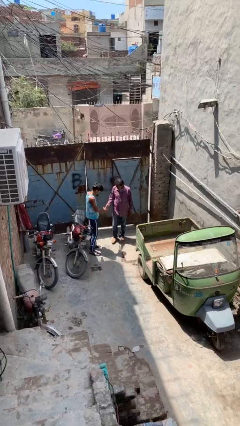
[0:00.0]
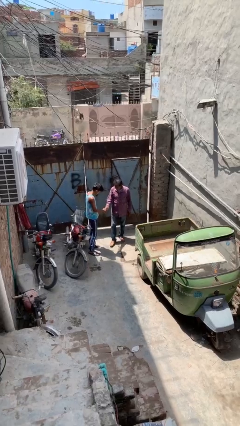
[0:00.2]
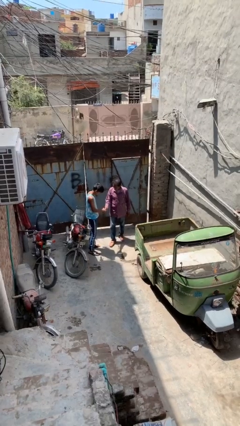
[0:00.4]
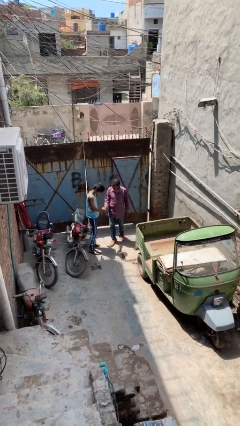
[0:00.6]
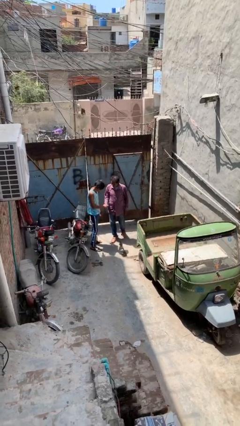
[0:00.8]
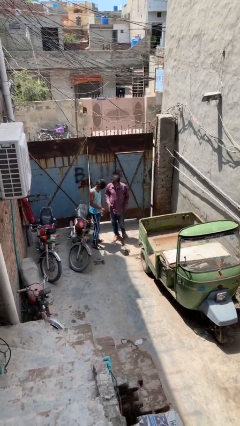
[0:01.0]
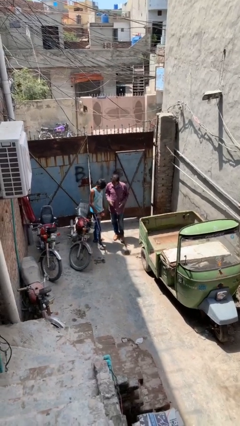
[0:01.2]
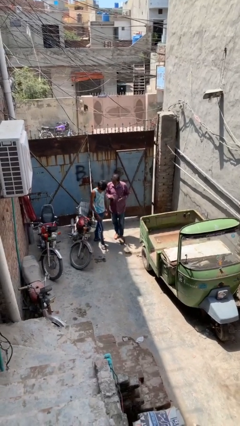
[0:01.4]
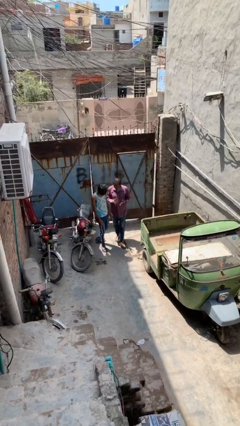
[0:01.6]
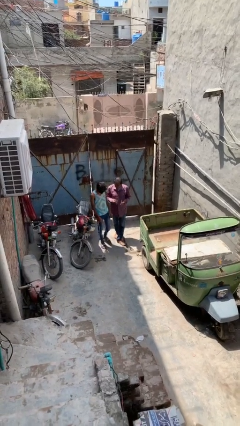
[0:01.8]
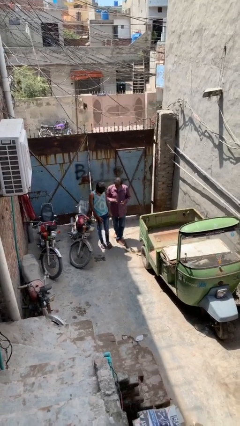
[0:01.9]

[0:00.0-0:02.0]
person shakes hand

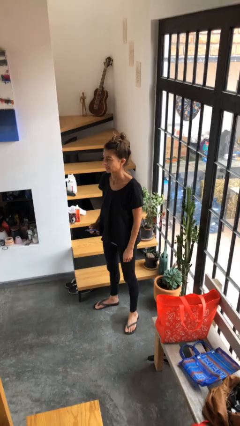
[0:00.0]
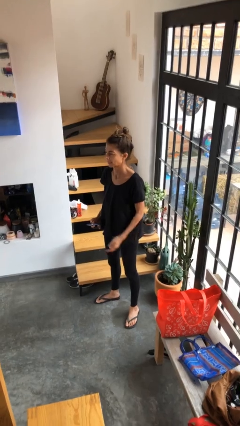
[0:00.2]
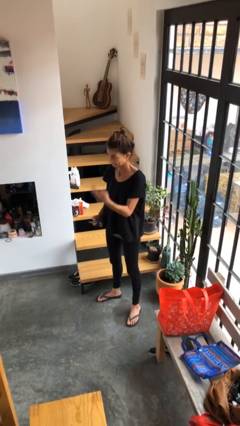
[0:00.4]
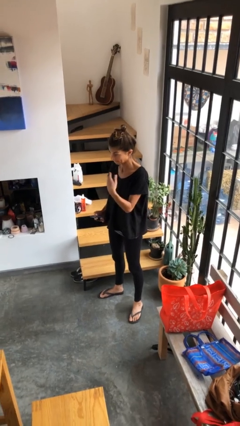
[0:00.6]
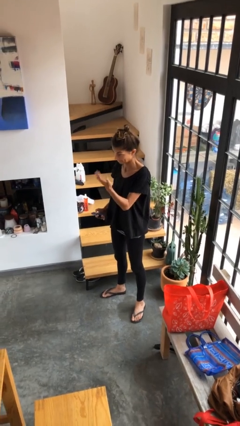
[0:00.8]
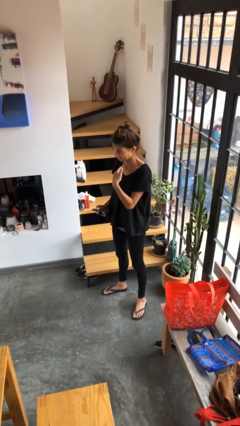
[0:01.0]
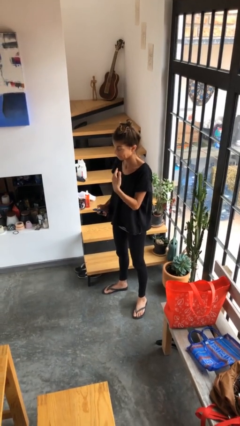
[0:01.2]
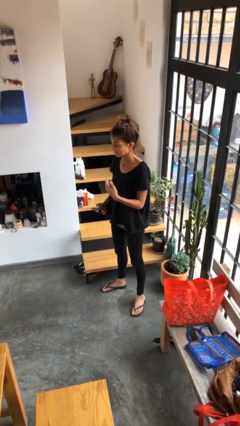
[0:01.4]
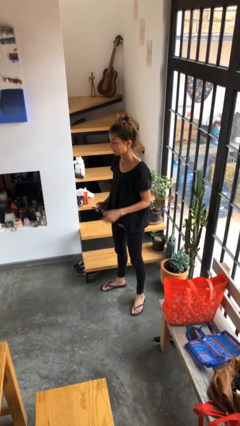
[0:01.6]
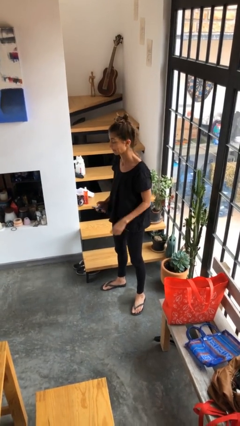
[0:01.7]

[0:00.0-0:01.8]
person gestures come here

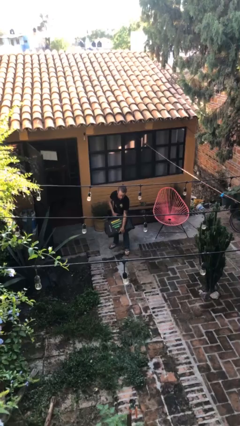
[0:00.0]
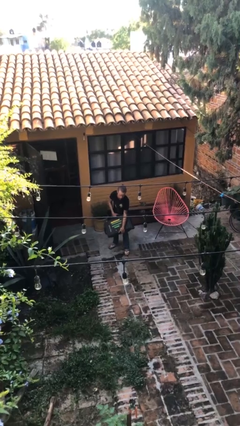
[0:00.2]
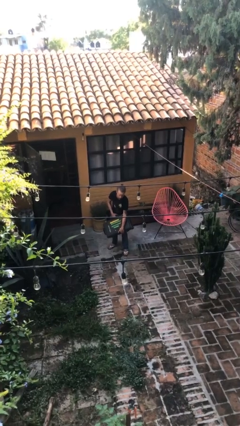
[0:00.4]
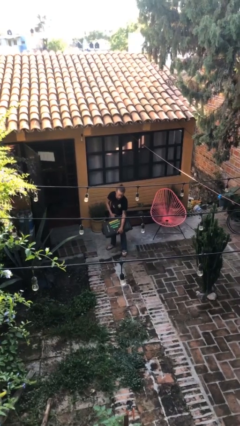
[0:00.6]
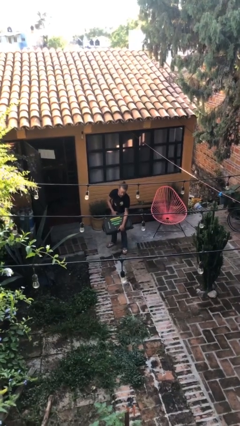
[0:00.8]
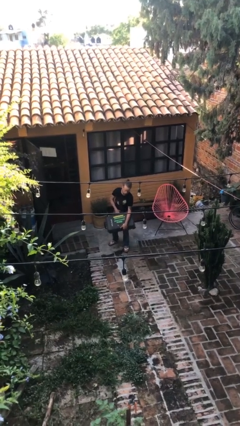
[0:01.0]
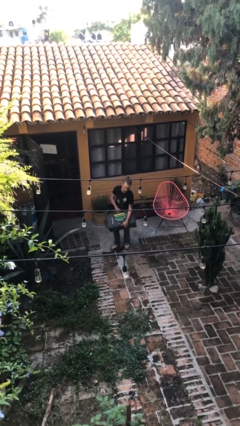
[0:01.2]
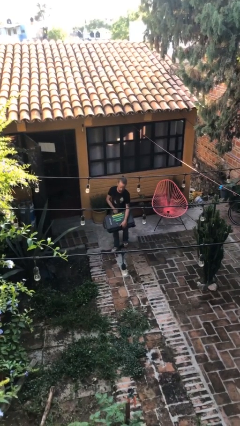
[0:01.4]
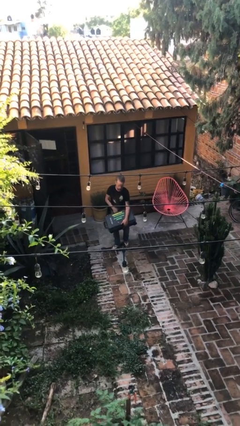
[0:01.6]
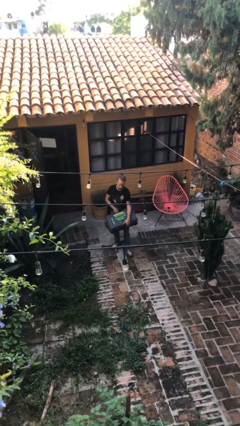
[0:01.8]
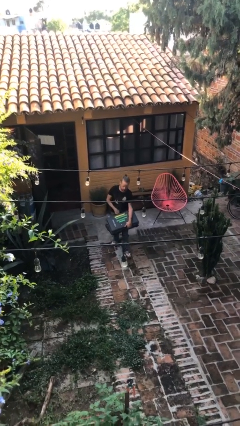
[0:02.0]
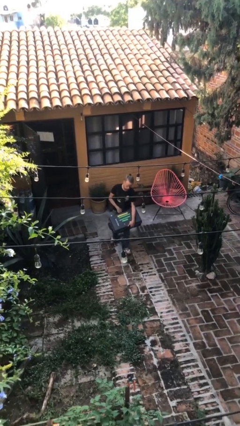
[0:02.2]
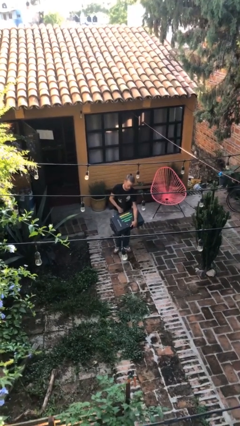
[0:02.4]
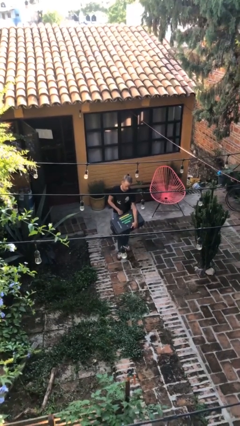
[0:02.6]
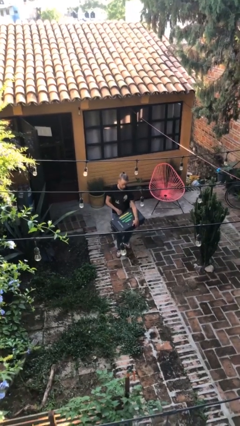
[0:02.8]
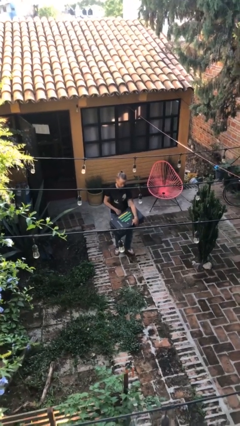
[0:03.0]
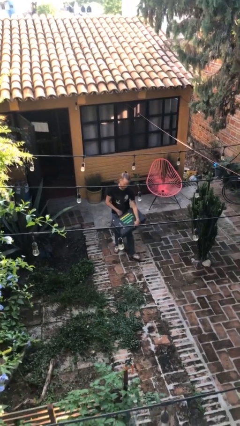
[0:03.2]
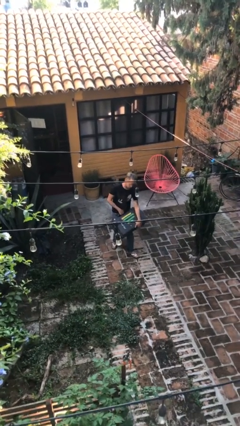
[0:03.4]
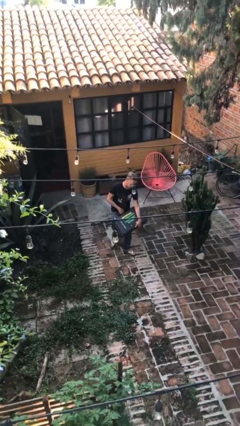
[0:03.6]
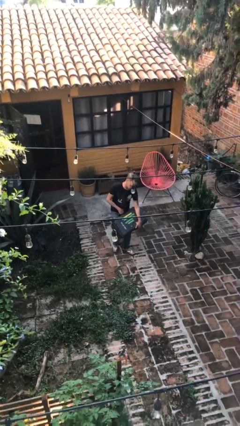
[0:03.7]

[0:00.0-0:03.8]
person carries heavy object

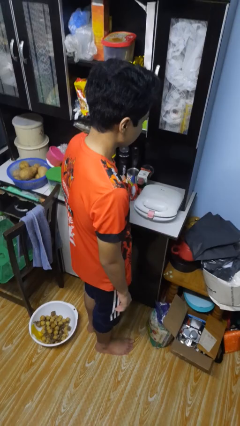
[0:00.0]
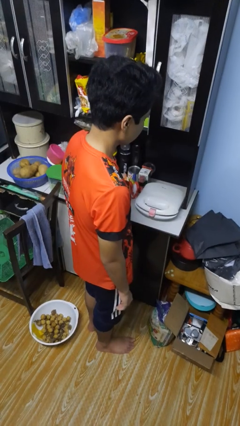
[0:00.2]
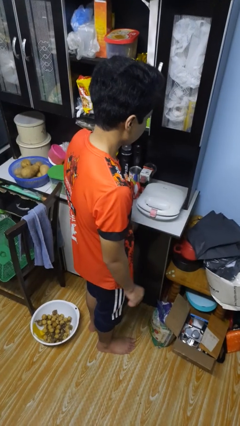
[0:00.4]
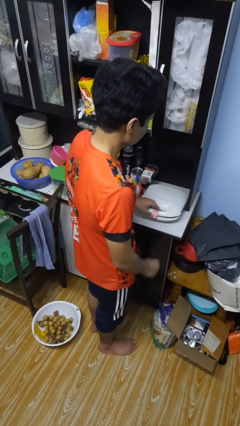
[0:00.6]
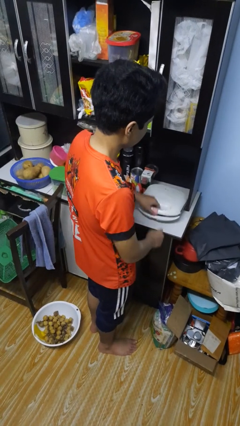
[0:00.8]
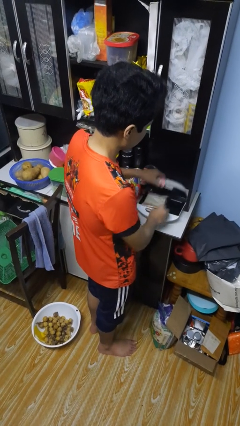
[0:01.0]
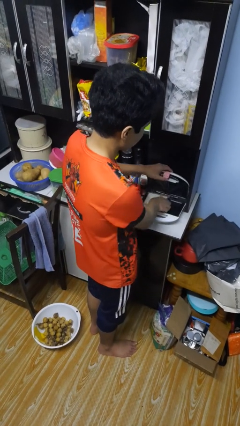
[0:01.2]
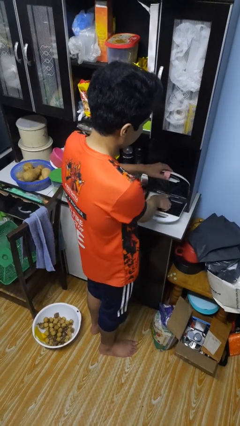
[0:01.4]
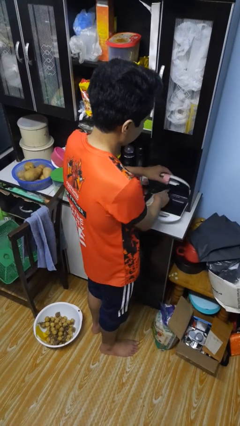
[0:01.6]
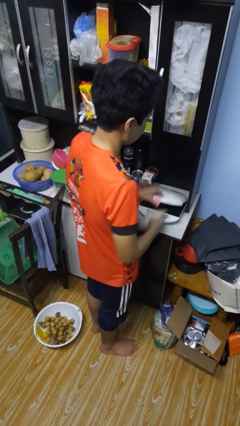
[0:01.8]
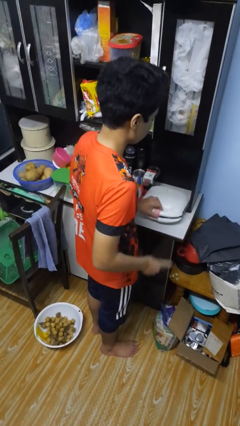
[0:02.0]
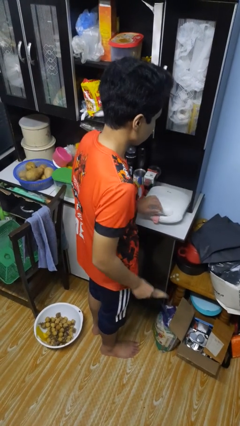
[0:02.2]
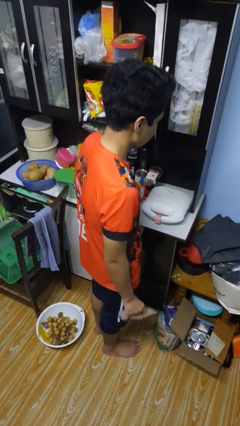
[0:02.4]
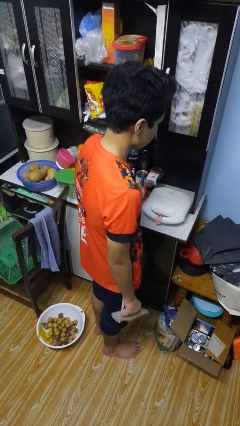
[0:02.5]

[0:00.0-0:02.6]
person takes object from toaster

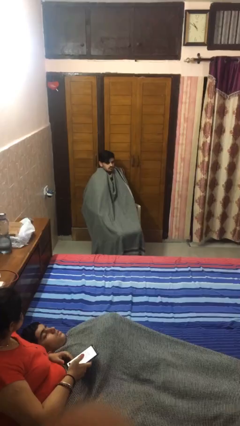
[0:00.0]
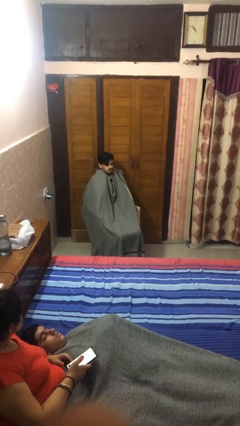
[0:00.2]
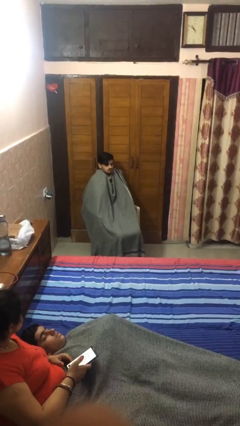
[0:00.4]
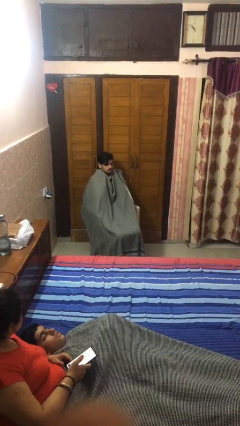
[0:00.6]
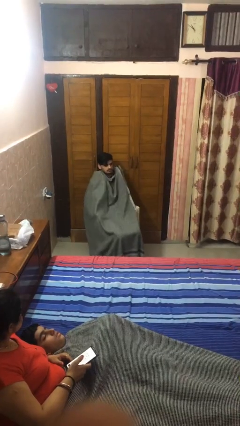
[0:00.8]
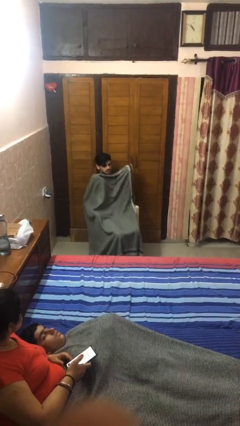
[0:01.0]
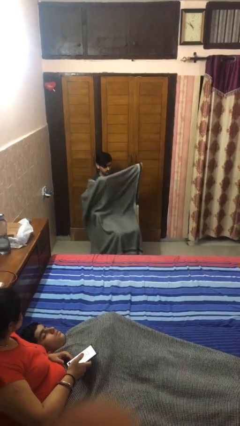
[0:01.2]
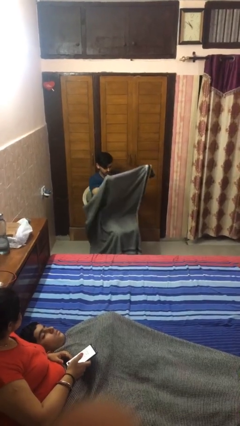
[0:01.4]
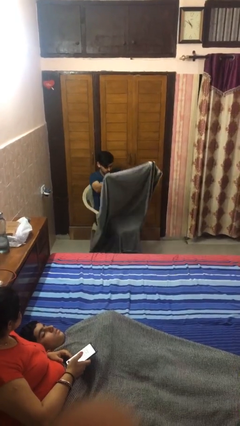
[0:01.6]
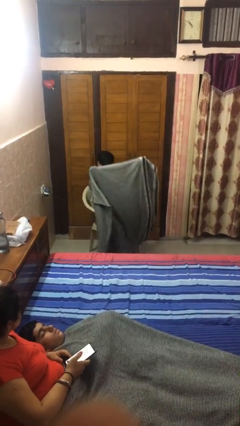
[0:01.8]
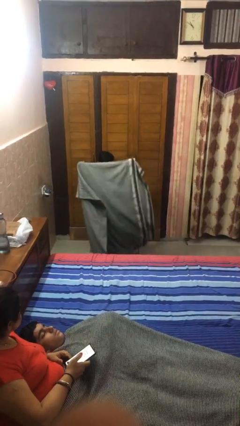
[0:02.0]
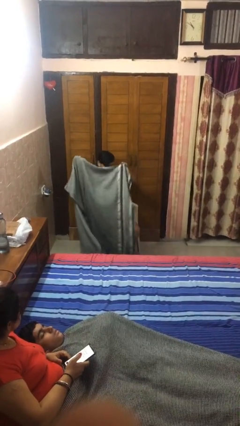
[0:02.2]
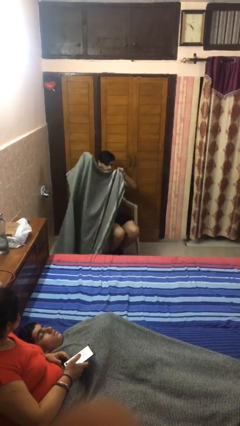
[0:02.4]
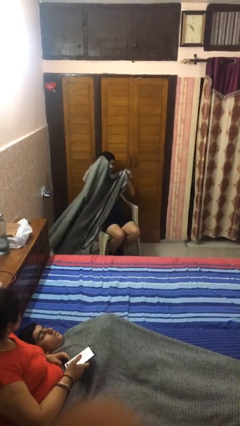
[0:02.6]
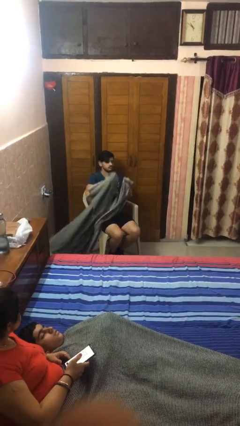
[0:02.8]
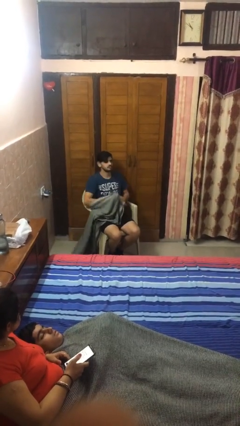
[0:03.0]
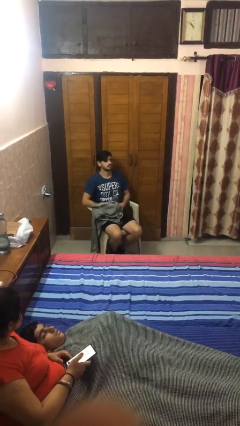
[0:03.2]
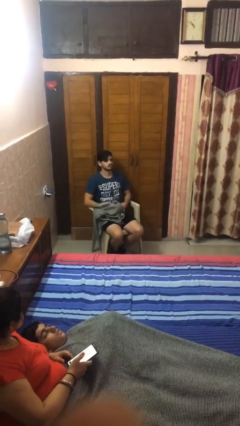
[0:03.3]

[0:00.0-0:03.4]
person uncovers with blanket

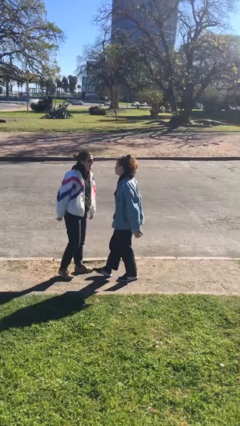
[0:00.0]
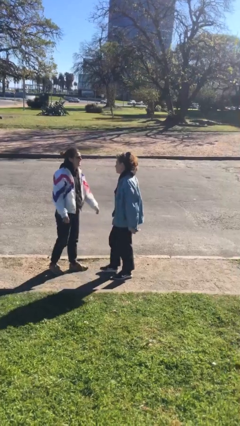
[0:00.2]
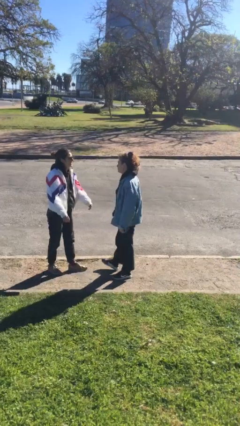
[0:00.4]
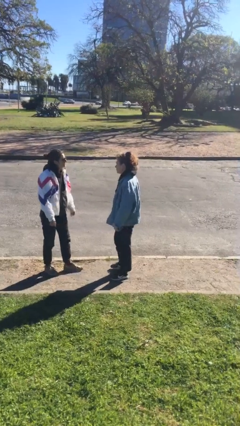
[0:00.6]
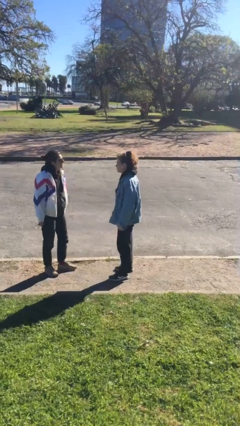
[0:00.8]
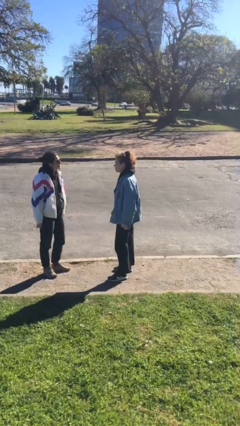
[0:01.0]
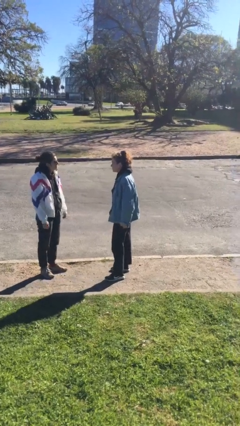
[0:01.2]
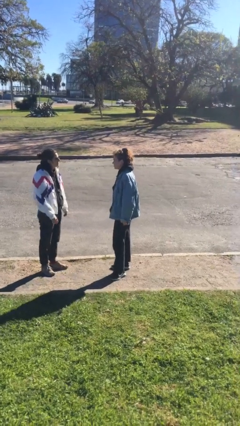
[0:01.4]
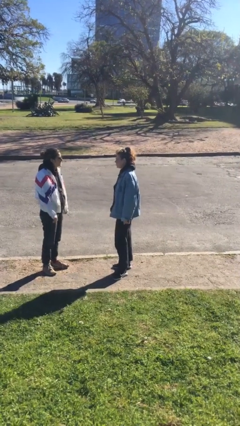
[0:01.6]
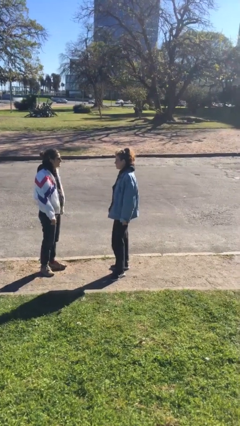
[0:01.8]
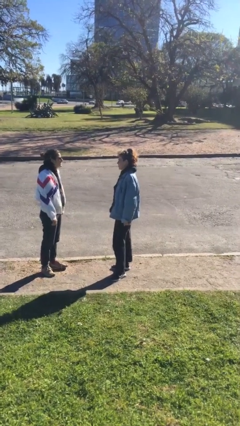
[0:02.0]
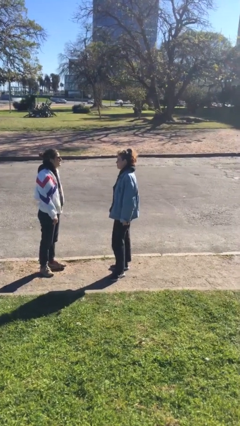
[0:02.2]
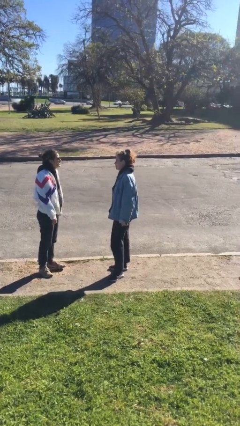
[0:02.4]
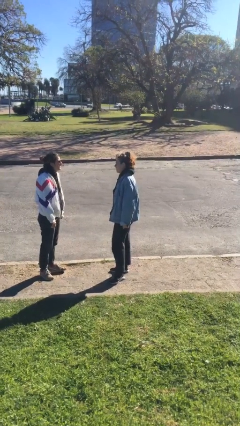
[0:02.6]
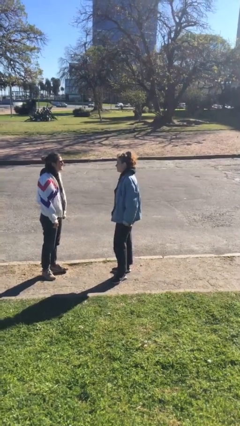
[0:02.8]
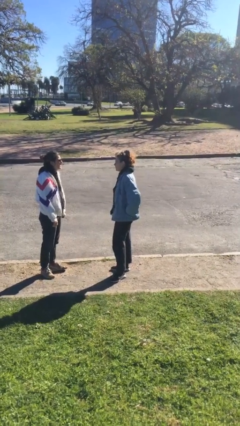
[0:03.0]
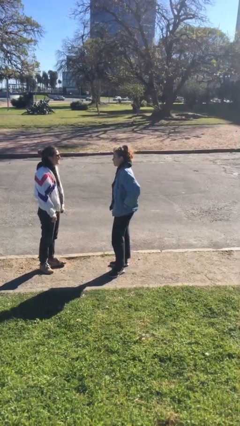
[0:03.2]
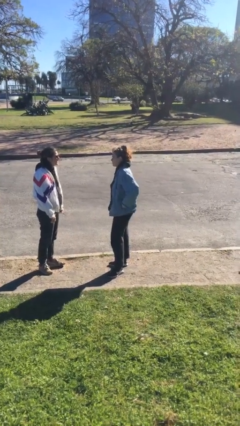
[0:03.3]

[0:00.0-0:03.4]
person talks to person

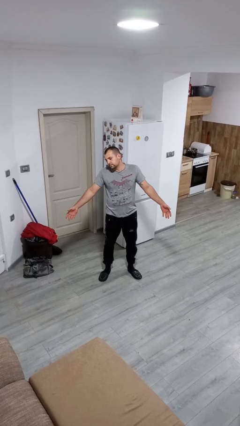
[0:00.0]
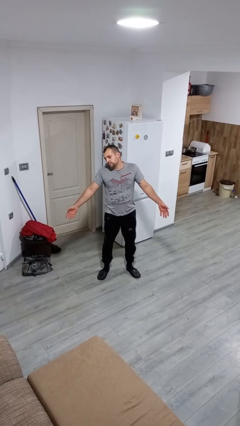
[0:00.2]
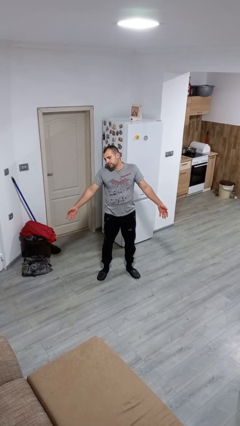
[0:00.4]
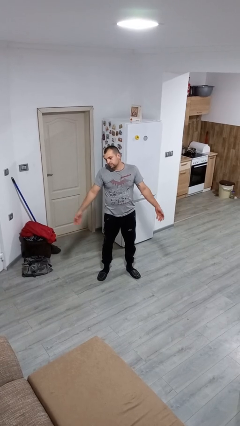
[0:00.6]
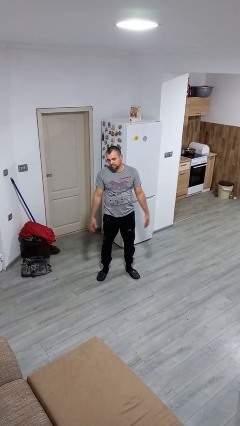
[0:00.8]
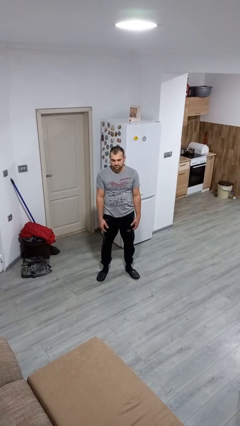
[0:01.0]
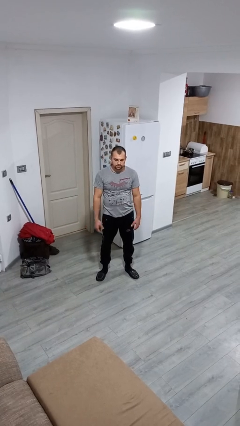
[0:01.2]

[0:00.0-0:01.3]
person shrugs
